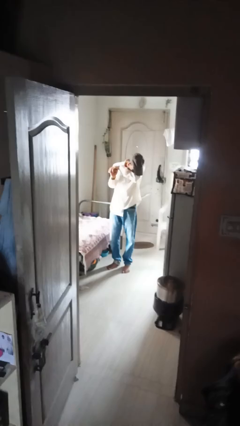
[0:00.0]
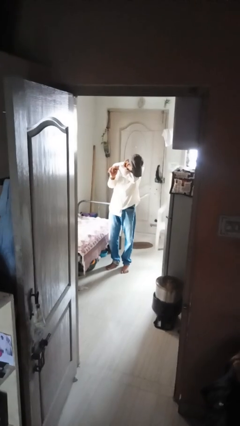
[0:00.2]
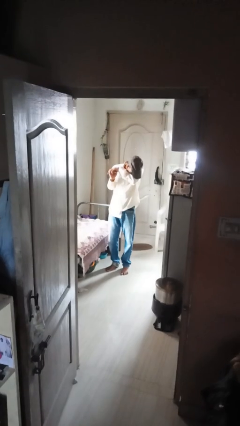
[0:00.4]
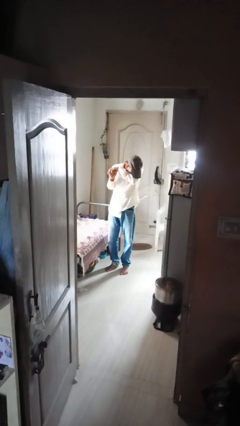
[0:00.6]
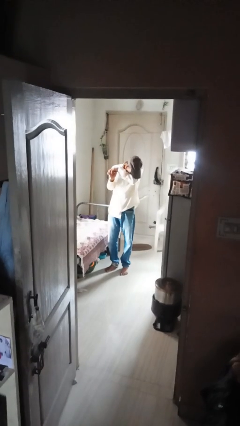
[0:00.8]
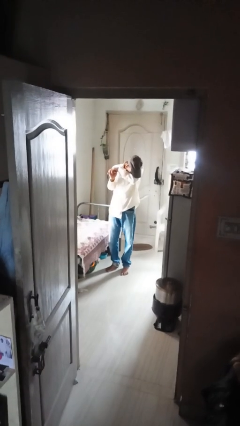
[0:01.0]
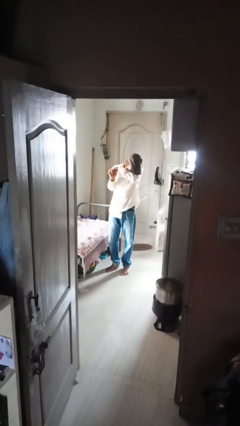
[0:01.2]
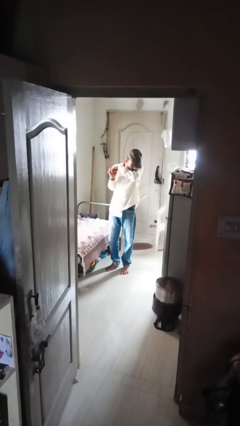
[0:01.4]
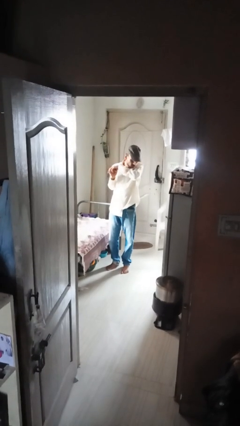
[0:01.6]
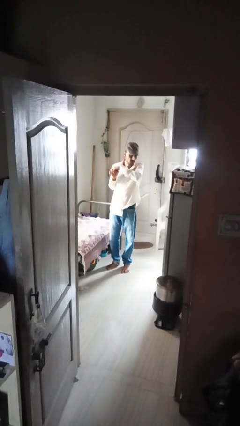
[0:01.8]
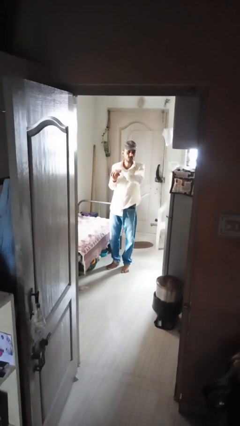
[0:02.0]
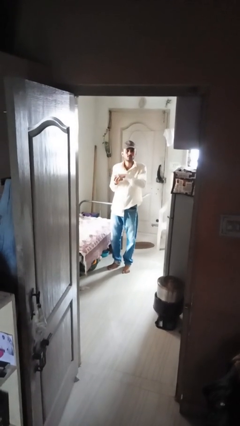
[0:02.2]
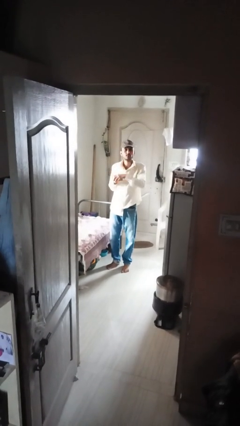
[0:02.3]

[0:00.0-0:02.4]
person sneezes into arm

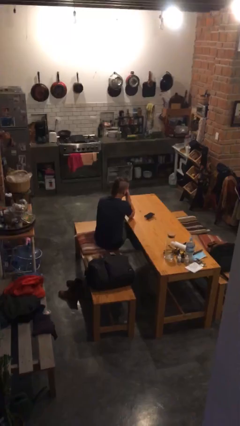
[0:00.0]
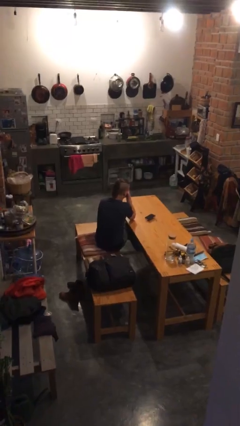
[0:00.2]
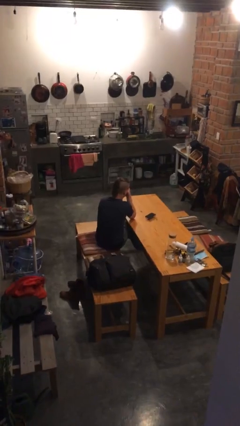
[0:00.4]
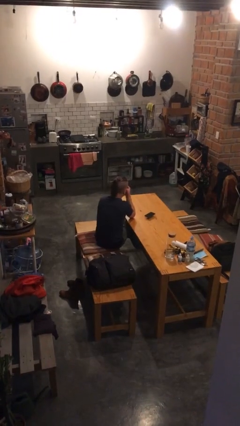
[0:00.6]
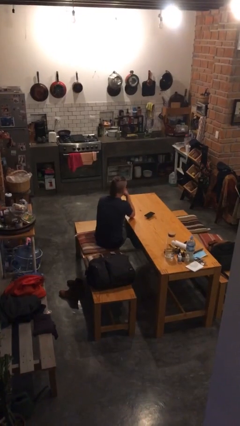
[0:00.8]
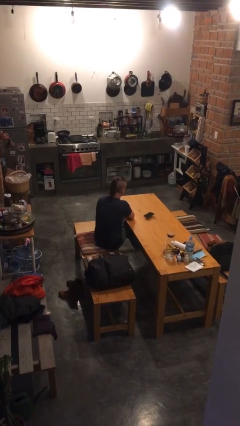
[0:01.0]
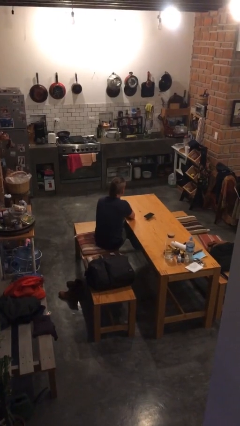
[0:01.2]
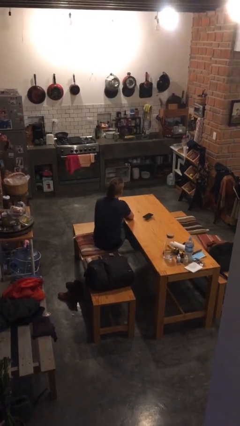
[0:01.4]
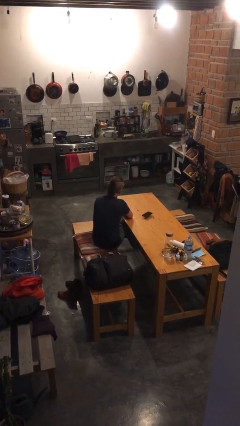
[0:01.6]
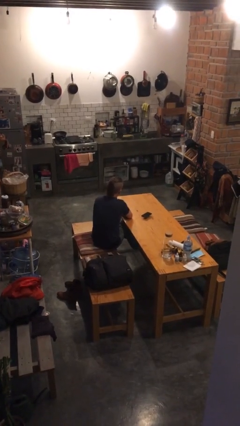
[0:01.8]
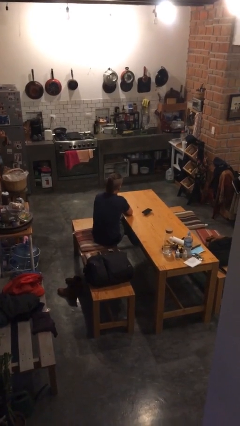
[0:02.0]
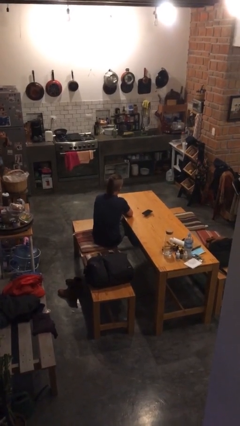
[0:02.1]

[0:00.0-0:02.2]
person nods head

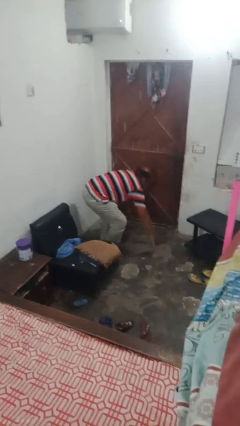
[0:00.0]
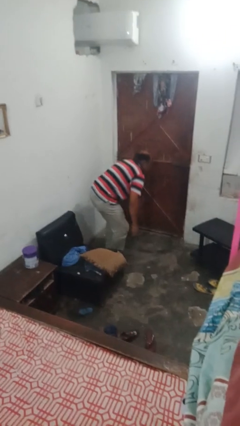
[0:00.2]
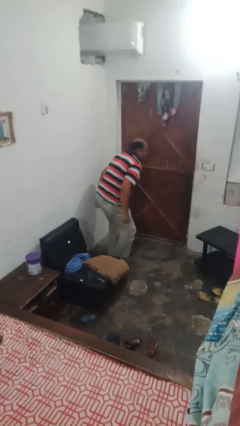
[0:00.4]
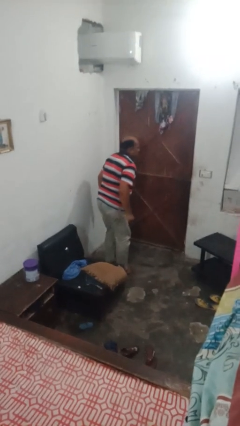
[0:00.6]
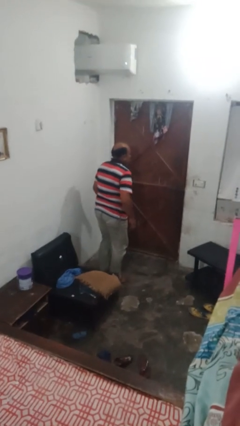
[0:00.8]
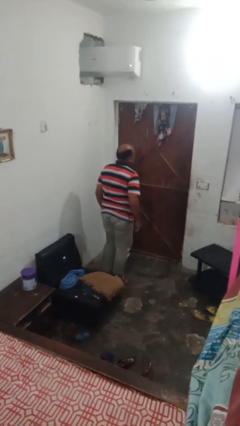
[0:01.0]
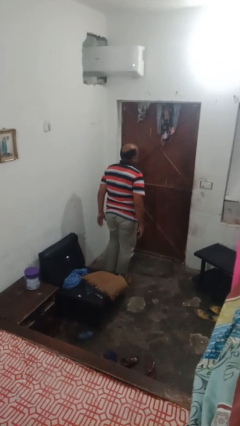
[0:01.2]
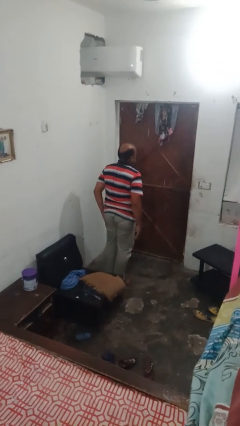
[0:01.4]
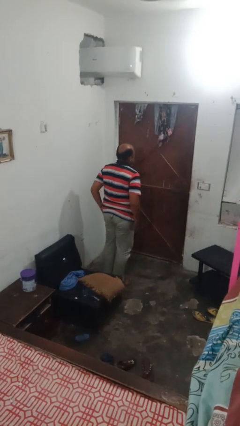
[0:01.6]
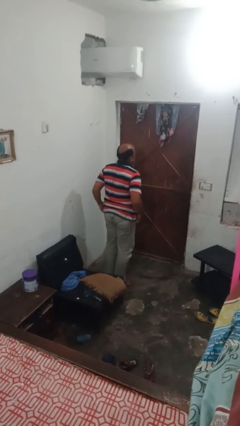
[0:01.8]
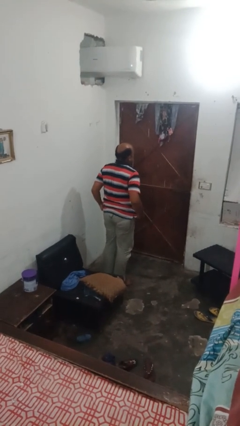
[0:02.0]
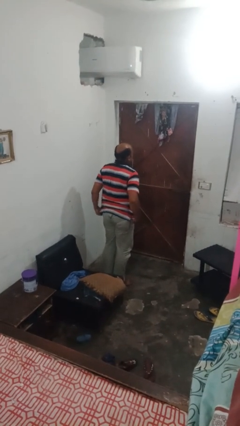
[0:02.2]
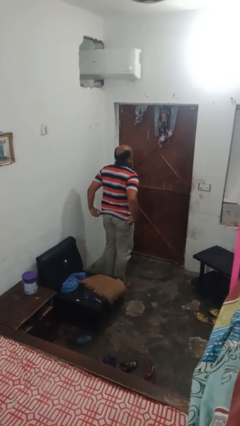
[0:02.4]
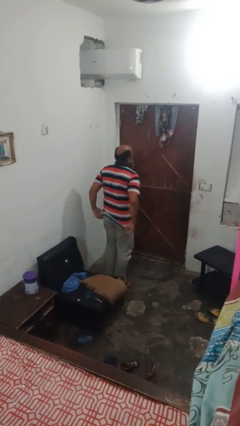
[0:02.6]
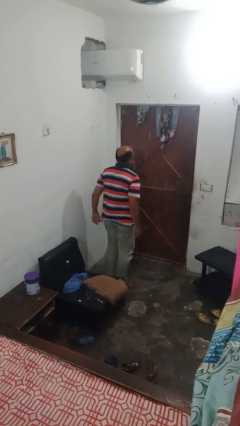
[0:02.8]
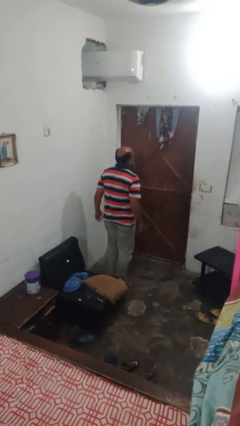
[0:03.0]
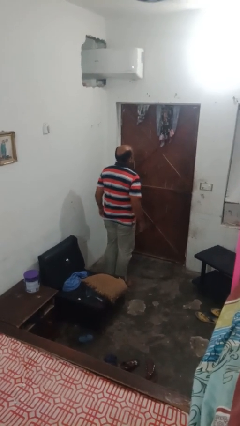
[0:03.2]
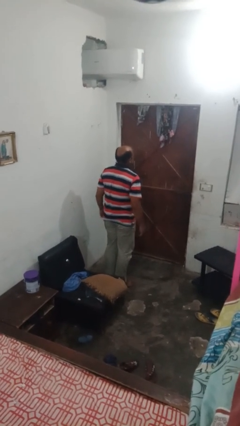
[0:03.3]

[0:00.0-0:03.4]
person stands up from floor

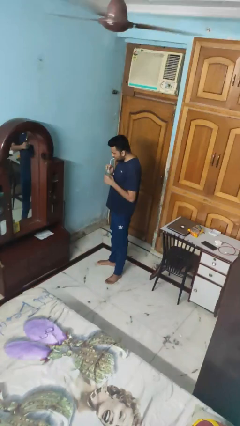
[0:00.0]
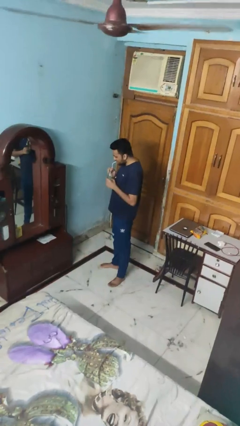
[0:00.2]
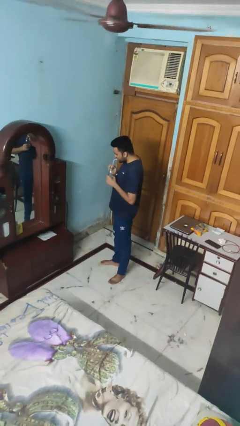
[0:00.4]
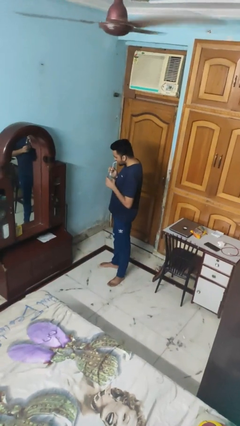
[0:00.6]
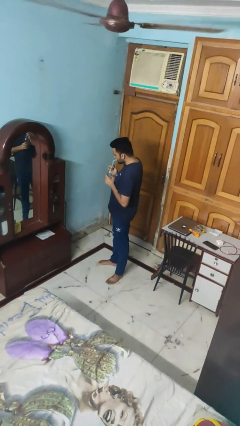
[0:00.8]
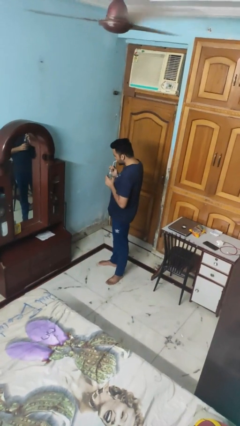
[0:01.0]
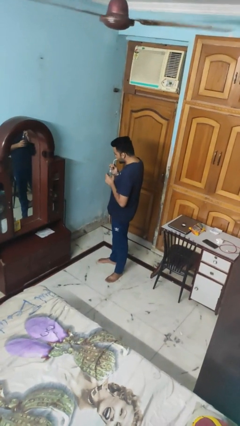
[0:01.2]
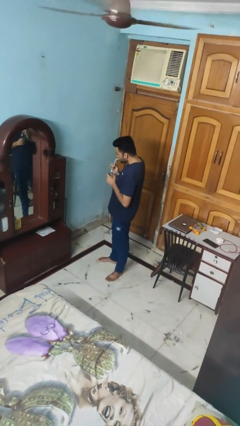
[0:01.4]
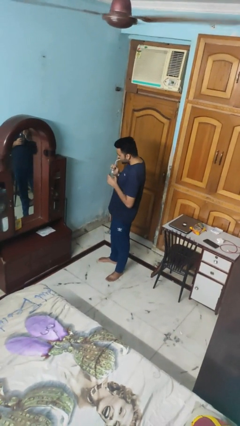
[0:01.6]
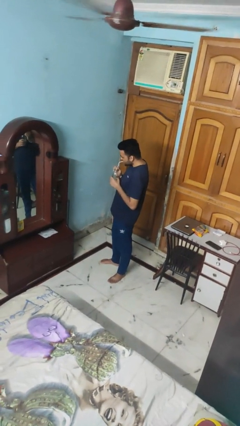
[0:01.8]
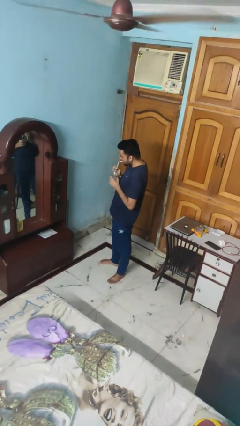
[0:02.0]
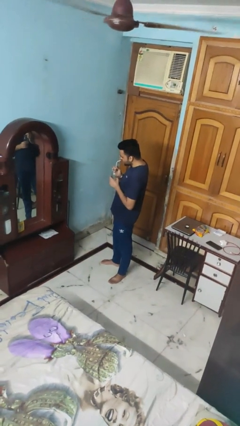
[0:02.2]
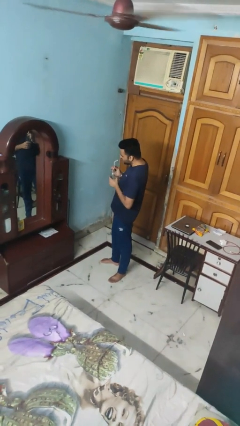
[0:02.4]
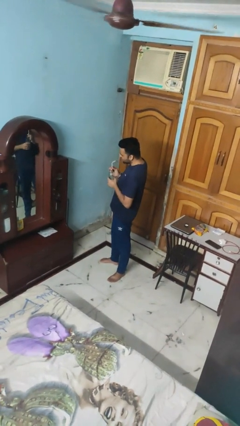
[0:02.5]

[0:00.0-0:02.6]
person drinks from straw

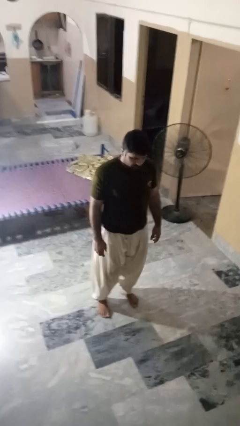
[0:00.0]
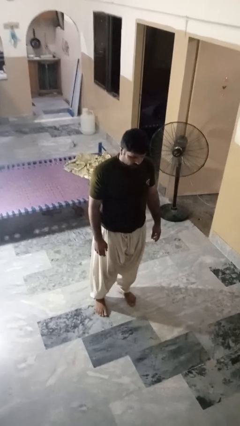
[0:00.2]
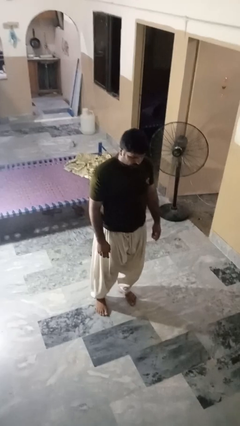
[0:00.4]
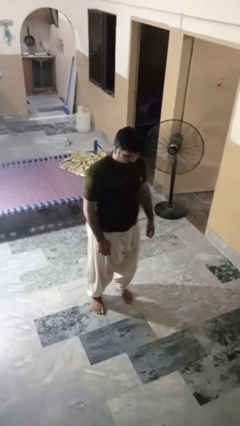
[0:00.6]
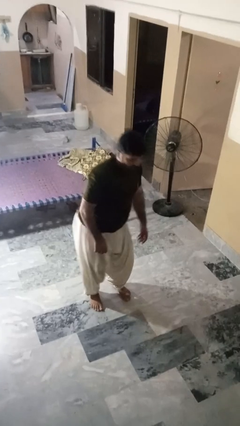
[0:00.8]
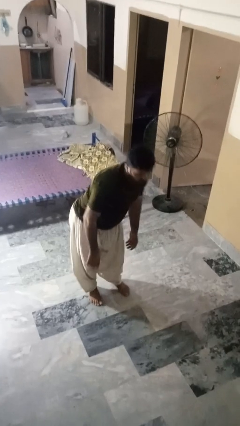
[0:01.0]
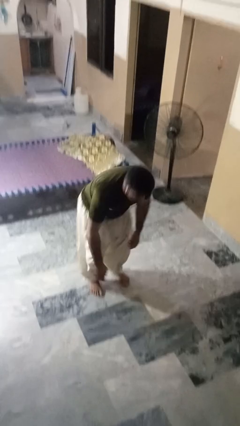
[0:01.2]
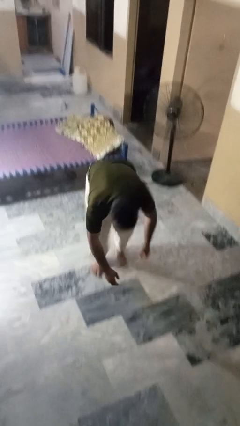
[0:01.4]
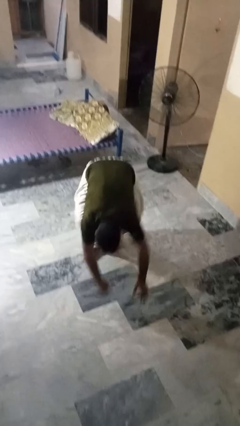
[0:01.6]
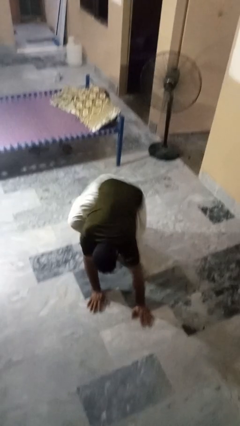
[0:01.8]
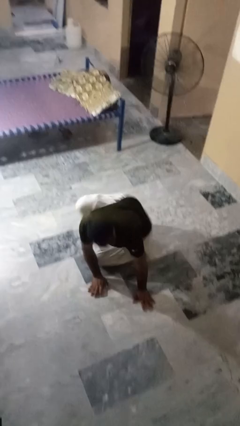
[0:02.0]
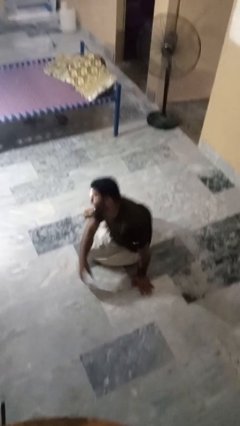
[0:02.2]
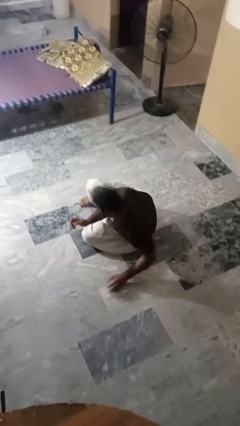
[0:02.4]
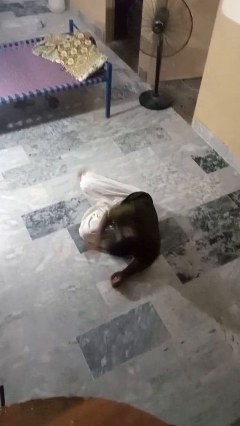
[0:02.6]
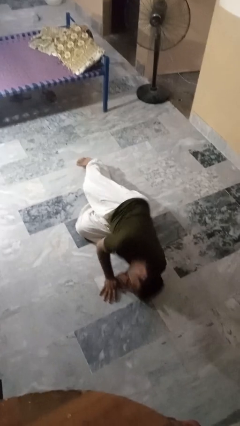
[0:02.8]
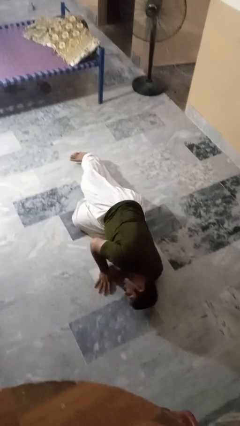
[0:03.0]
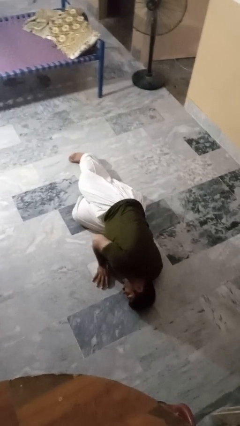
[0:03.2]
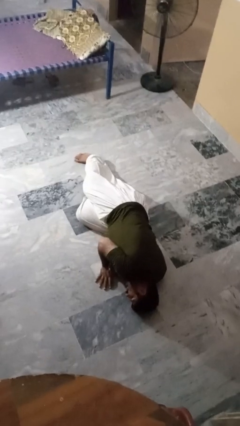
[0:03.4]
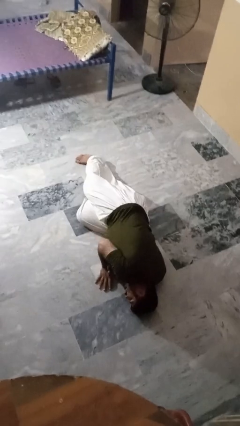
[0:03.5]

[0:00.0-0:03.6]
person falls while standing

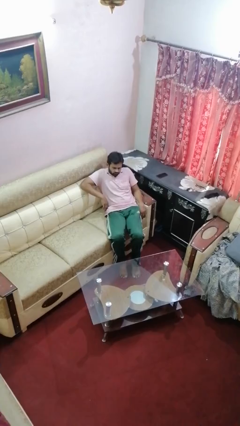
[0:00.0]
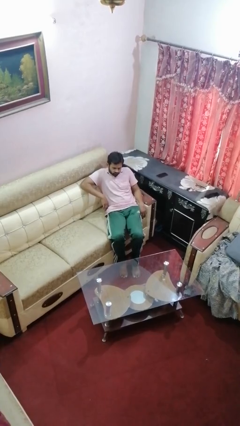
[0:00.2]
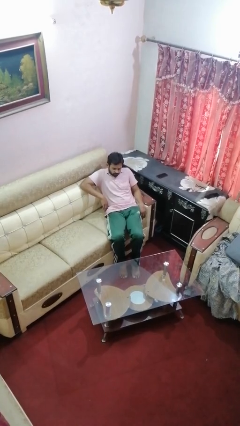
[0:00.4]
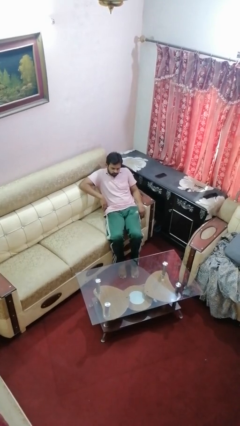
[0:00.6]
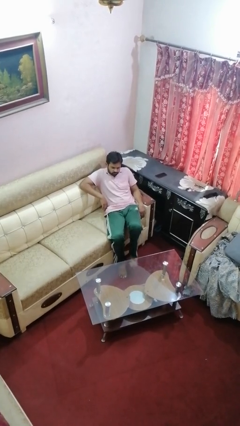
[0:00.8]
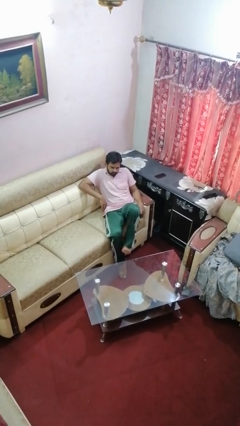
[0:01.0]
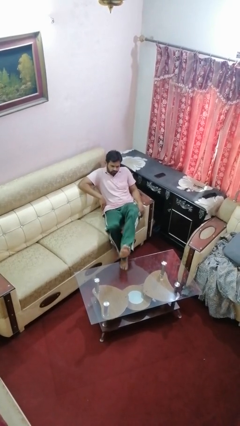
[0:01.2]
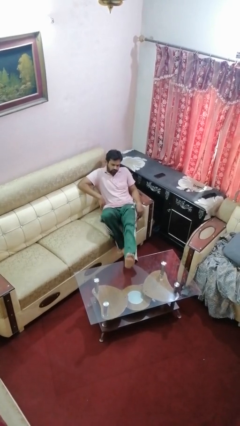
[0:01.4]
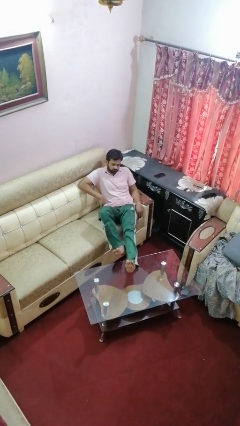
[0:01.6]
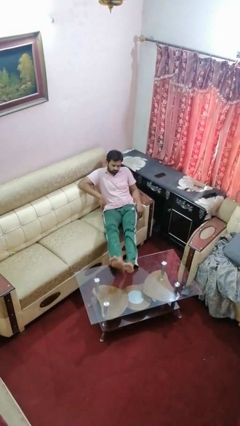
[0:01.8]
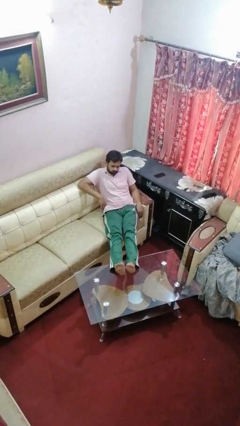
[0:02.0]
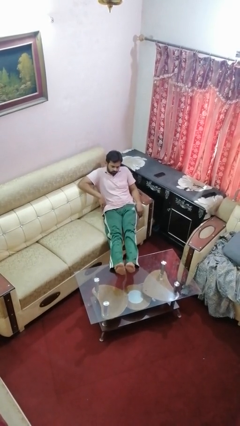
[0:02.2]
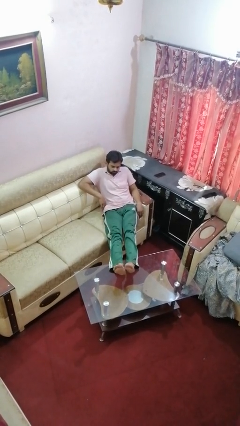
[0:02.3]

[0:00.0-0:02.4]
person puts feet up

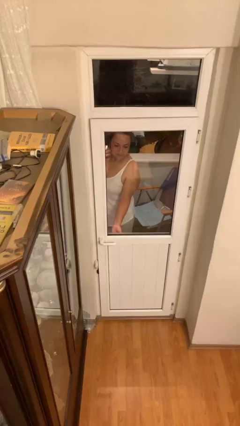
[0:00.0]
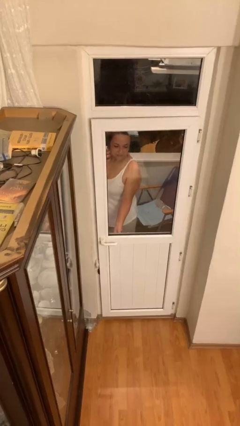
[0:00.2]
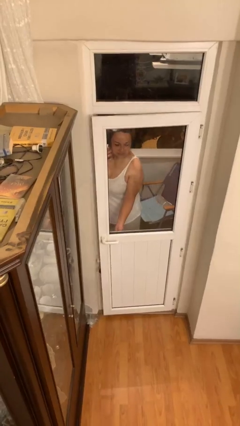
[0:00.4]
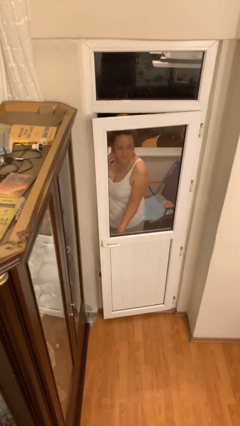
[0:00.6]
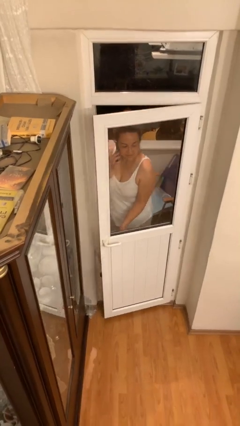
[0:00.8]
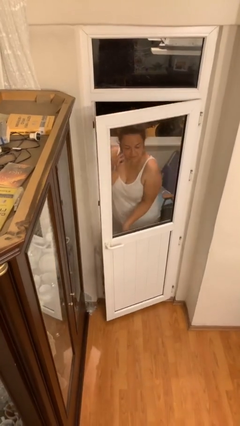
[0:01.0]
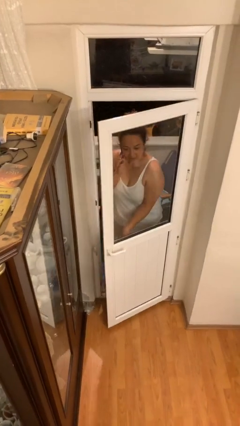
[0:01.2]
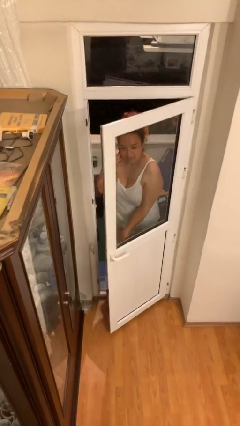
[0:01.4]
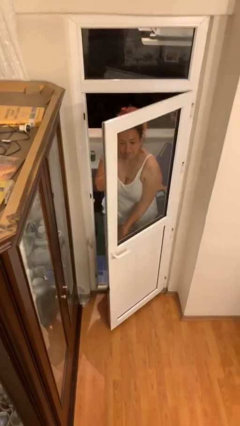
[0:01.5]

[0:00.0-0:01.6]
person opens facility door
